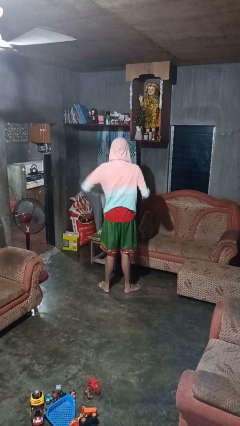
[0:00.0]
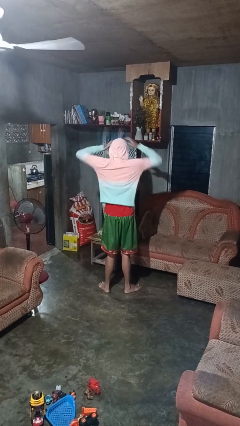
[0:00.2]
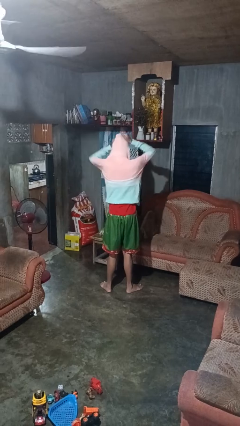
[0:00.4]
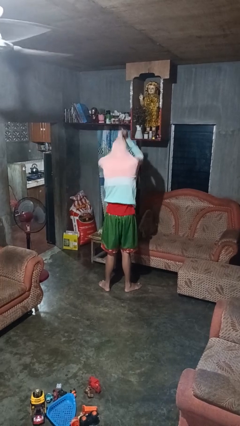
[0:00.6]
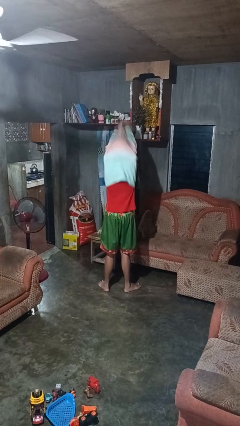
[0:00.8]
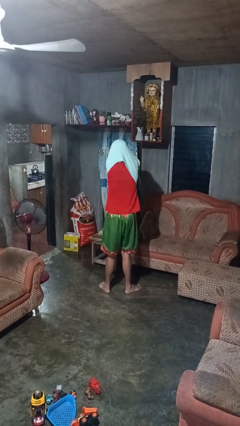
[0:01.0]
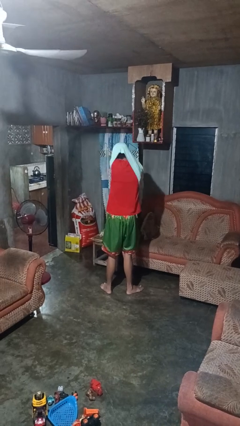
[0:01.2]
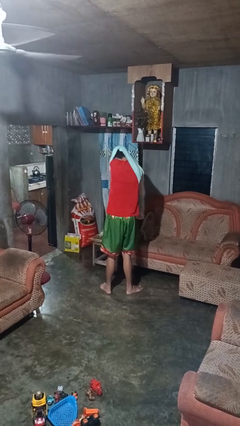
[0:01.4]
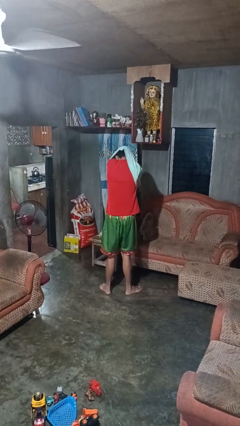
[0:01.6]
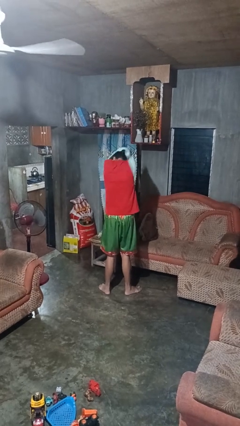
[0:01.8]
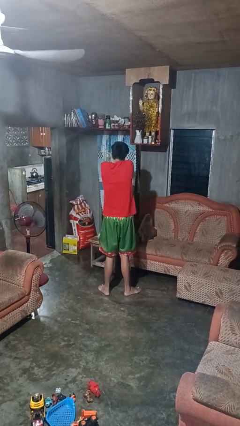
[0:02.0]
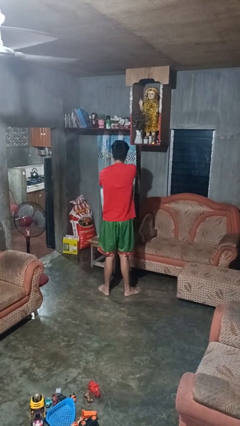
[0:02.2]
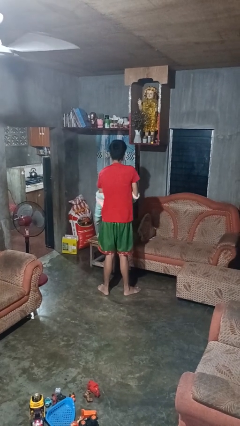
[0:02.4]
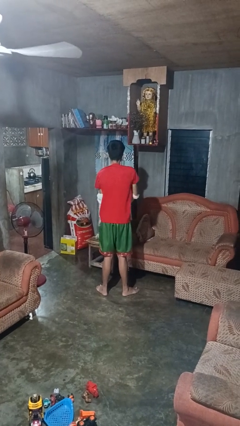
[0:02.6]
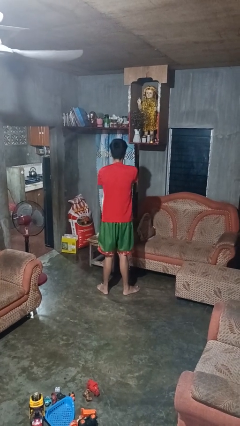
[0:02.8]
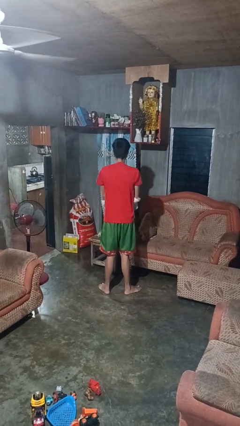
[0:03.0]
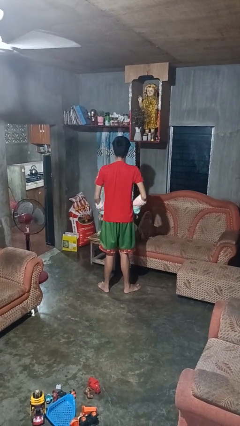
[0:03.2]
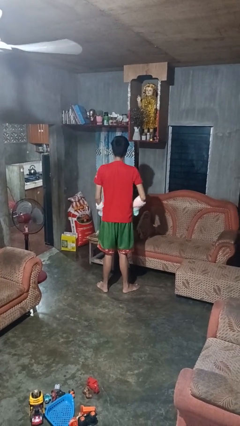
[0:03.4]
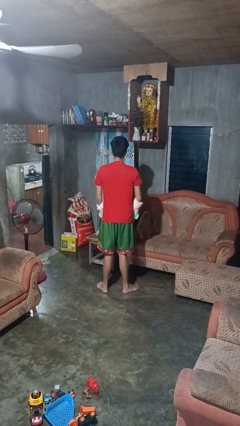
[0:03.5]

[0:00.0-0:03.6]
person takes off hoodie

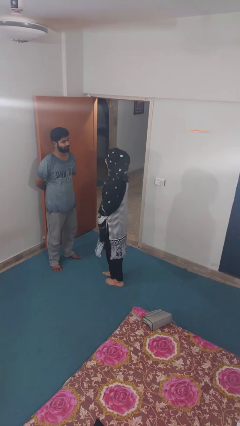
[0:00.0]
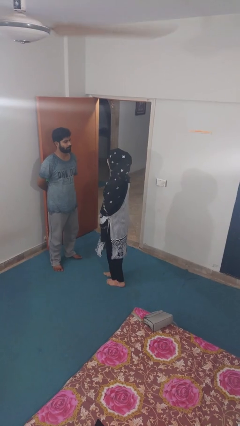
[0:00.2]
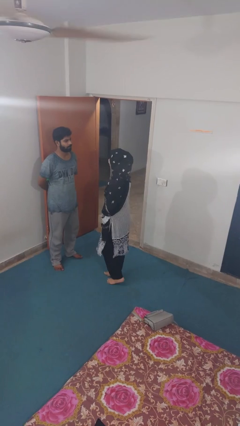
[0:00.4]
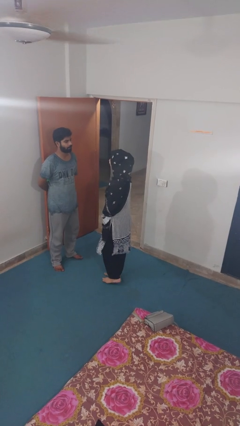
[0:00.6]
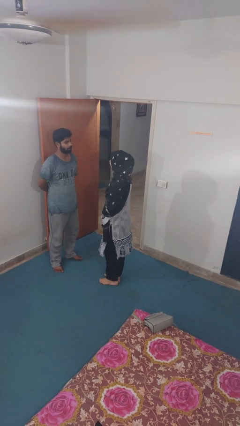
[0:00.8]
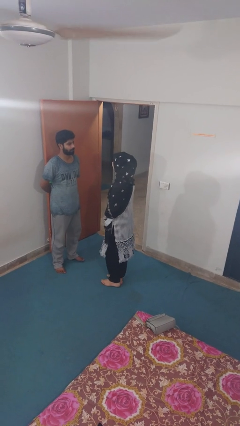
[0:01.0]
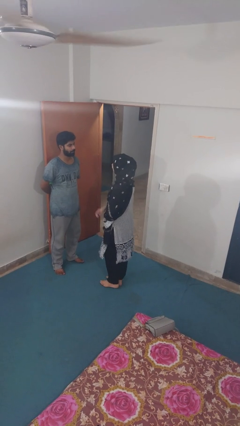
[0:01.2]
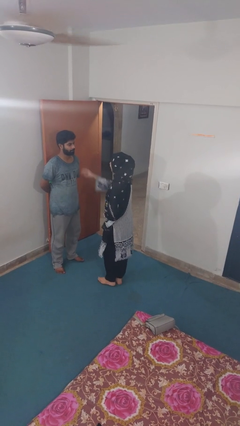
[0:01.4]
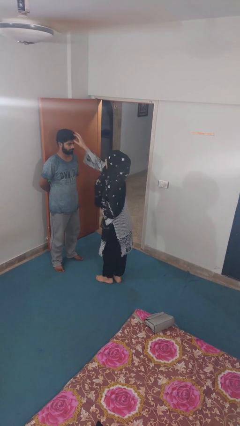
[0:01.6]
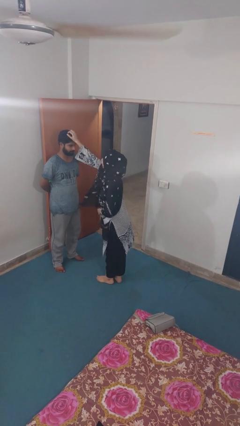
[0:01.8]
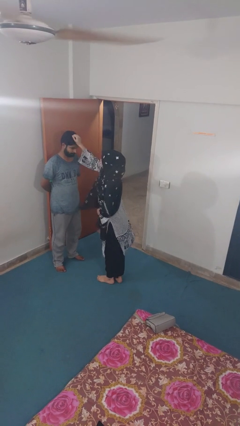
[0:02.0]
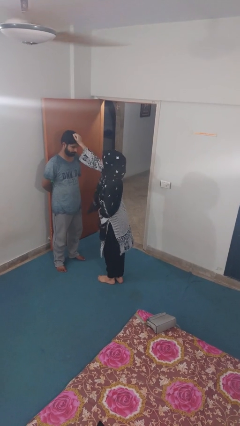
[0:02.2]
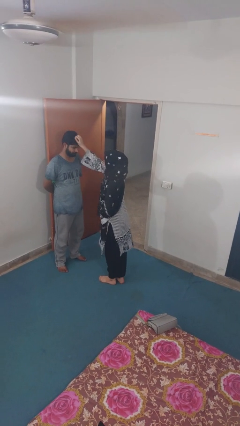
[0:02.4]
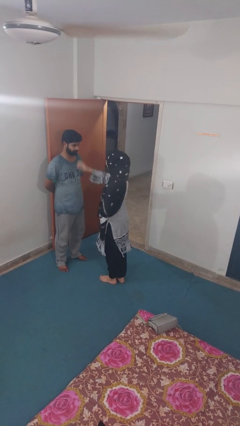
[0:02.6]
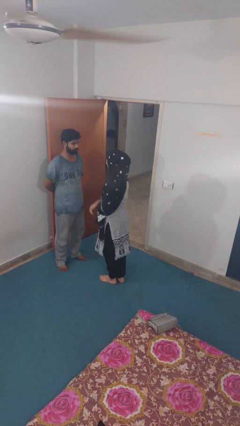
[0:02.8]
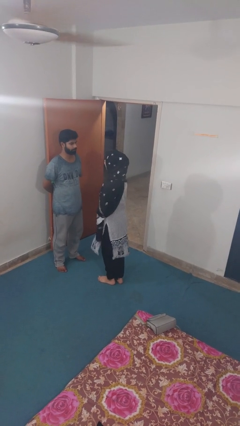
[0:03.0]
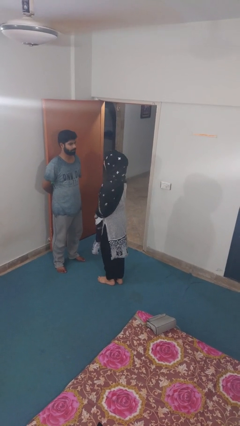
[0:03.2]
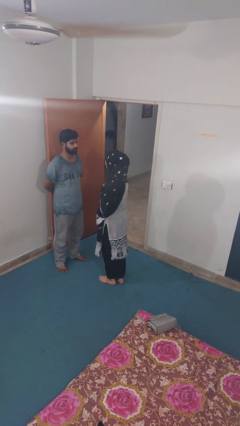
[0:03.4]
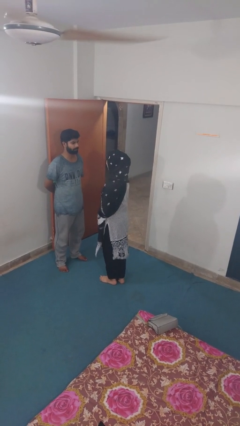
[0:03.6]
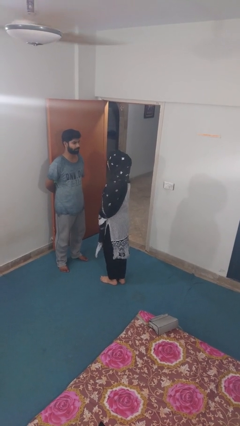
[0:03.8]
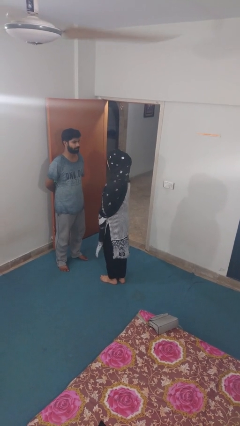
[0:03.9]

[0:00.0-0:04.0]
person grabs person by hair

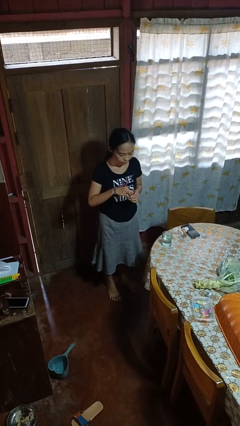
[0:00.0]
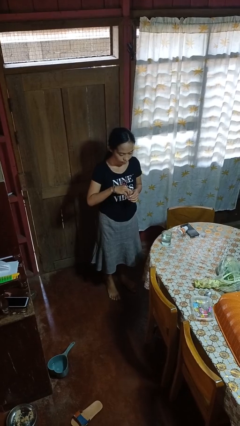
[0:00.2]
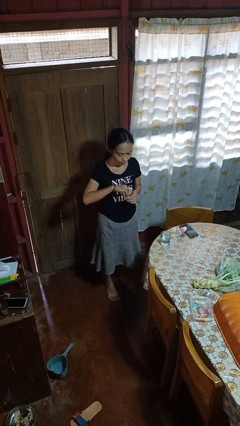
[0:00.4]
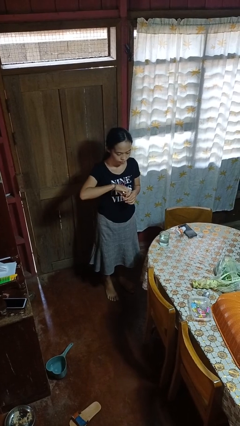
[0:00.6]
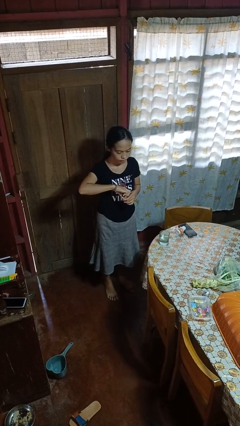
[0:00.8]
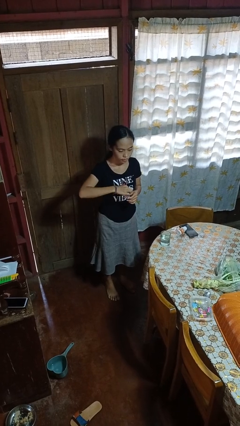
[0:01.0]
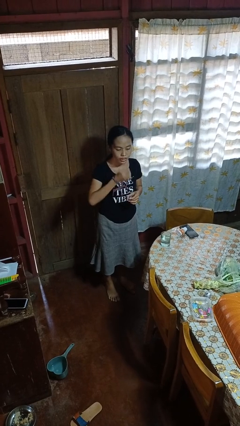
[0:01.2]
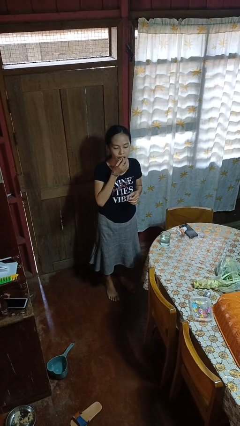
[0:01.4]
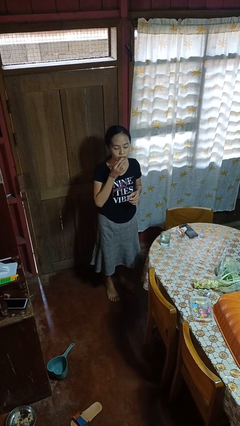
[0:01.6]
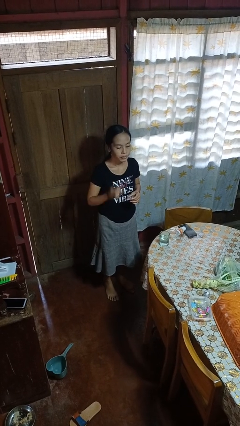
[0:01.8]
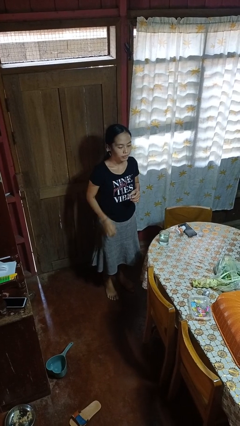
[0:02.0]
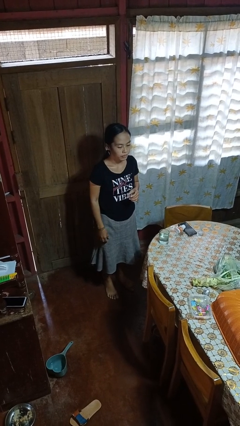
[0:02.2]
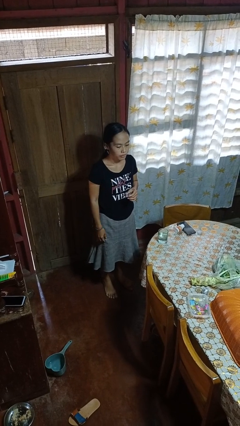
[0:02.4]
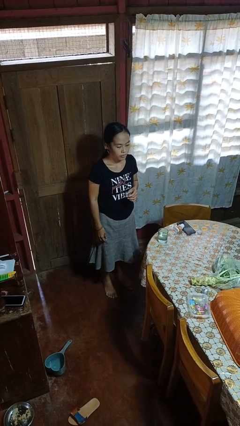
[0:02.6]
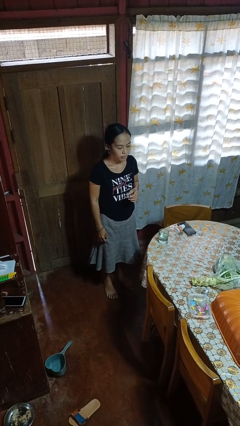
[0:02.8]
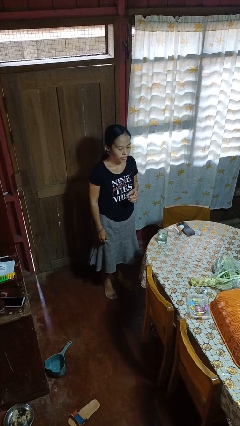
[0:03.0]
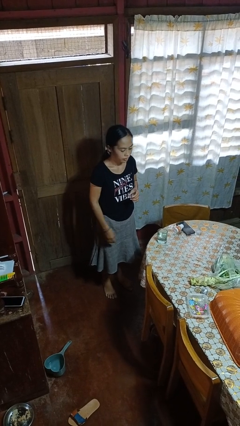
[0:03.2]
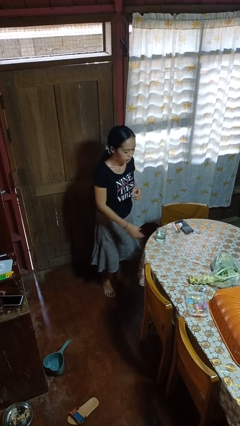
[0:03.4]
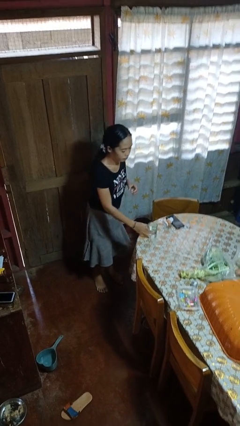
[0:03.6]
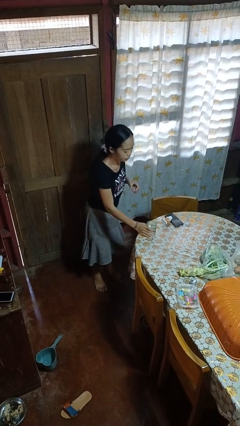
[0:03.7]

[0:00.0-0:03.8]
person takes medicine pills

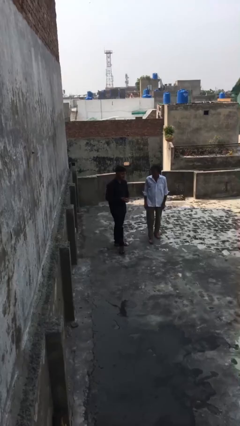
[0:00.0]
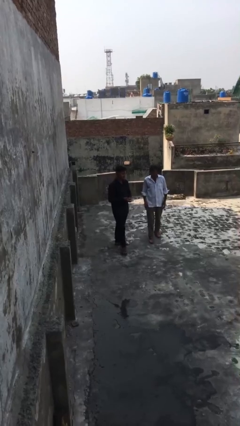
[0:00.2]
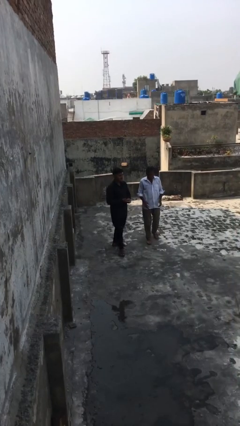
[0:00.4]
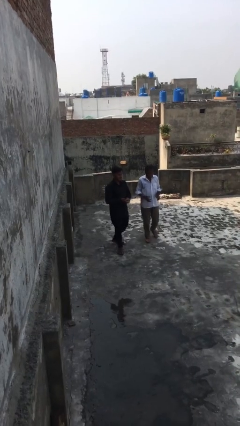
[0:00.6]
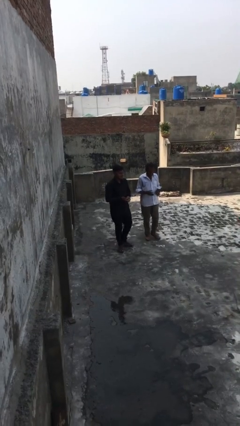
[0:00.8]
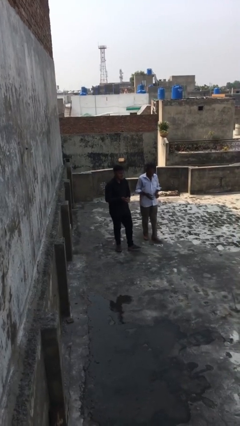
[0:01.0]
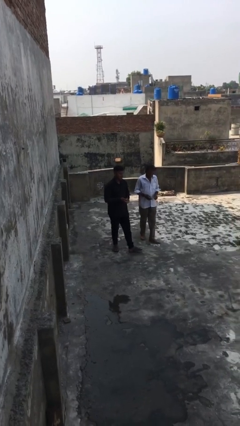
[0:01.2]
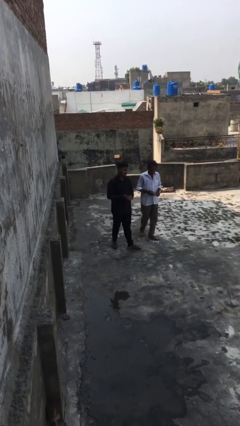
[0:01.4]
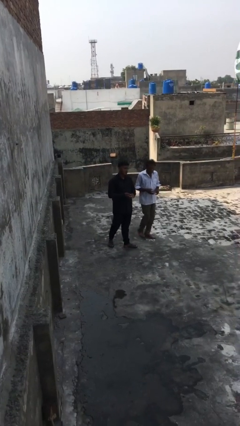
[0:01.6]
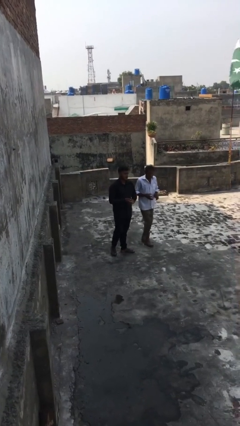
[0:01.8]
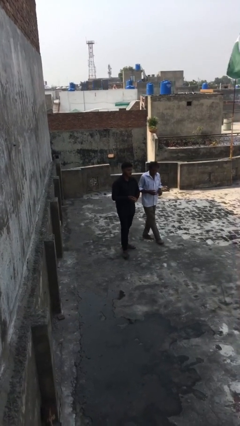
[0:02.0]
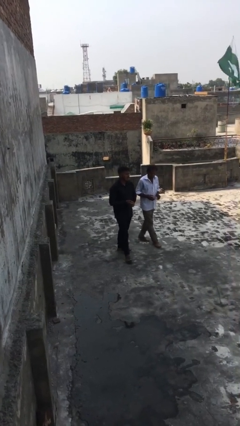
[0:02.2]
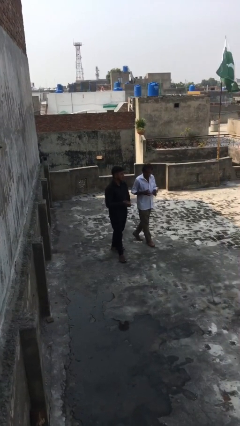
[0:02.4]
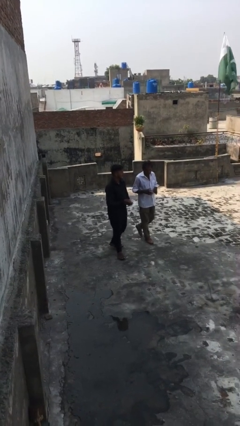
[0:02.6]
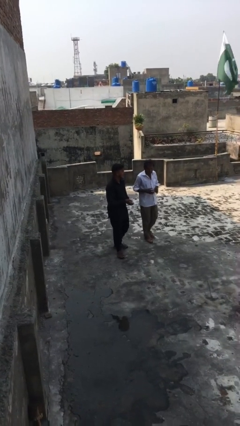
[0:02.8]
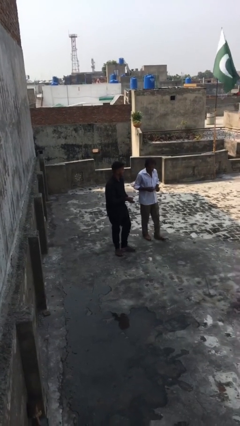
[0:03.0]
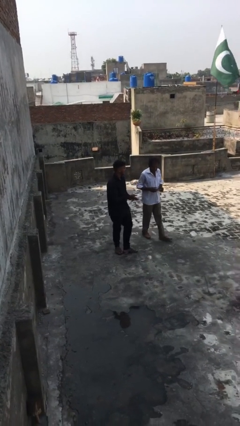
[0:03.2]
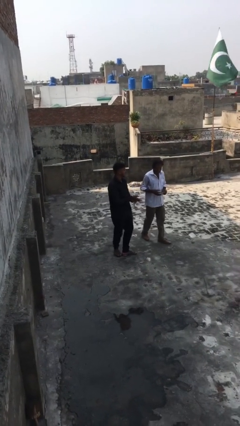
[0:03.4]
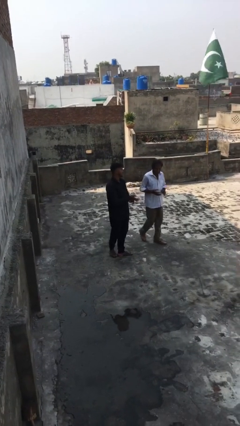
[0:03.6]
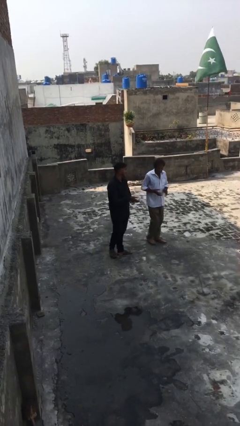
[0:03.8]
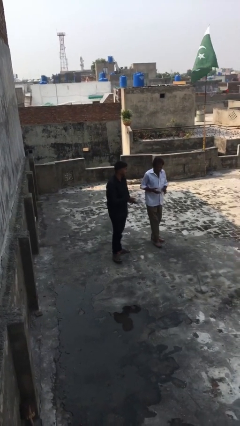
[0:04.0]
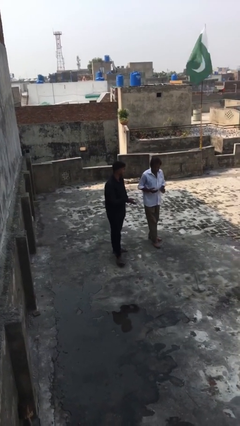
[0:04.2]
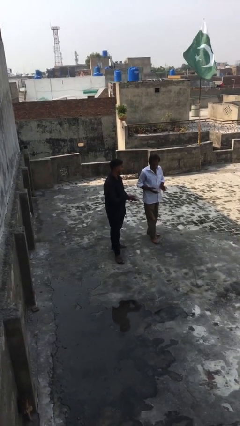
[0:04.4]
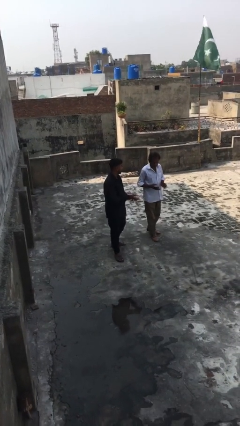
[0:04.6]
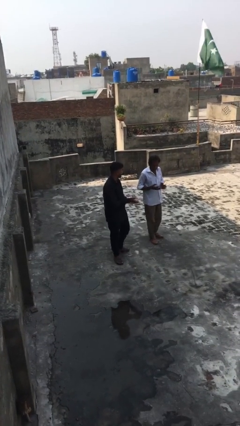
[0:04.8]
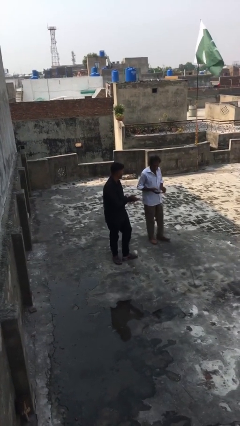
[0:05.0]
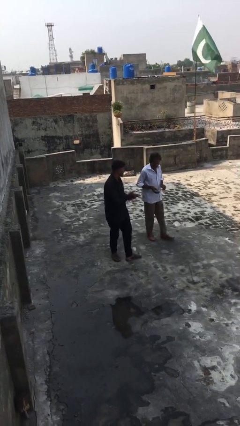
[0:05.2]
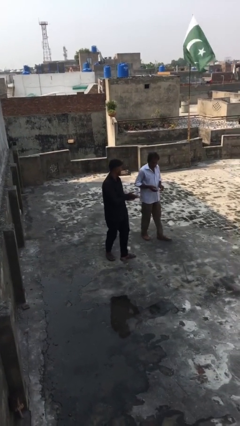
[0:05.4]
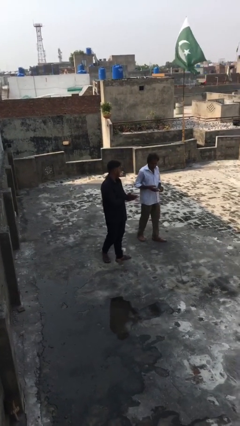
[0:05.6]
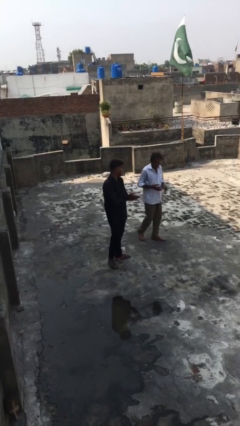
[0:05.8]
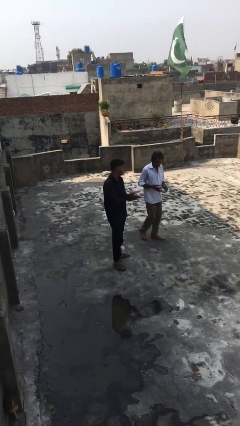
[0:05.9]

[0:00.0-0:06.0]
person talks to person

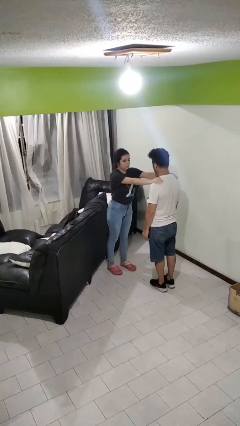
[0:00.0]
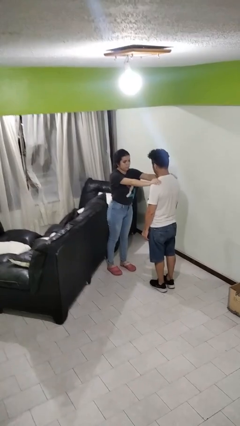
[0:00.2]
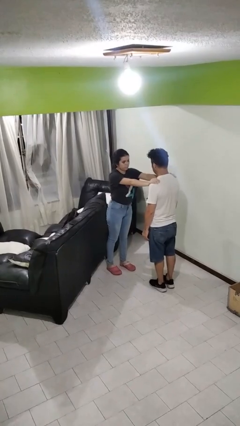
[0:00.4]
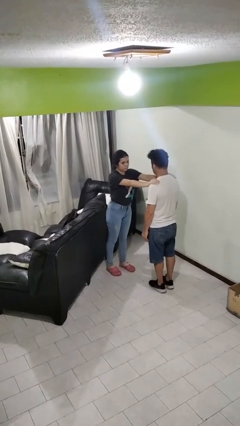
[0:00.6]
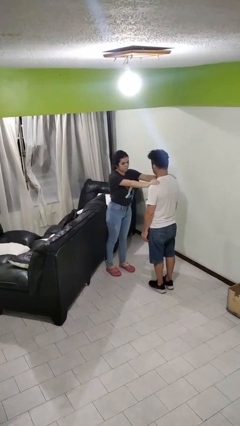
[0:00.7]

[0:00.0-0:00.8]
person grabs person by shoulder
